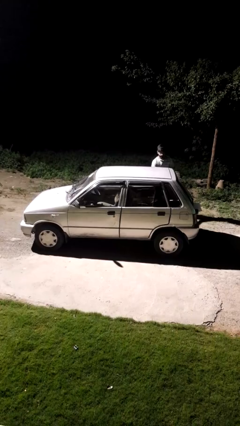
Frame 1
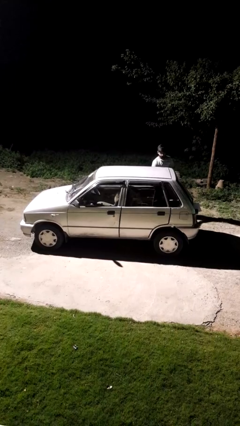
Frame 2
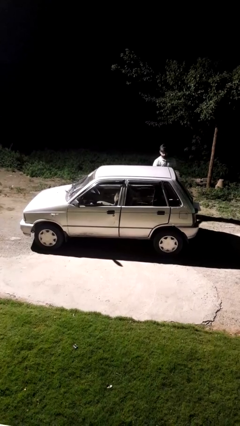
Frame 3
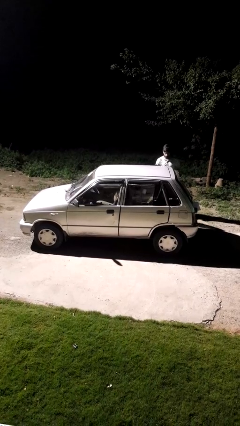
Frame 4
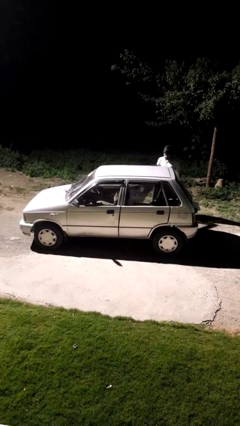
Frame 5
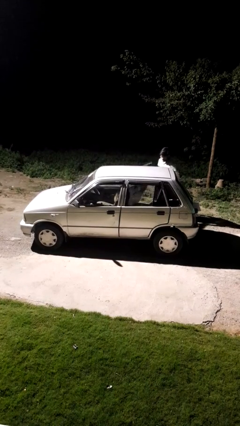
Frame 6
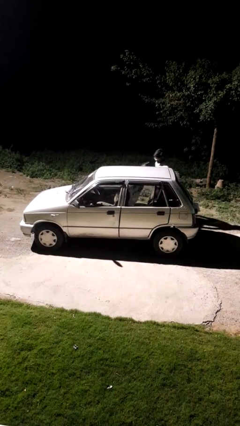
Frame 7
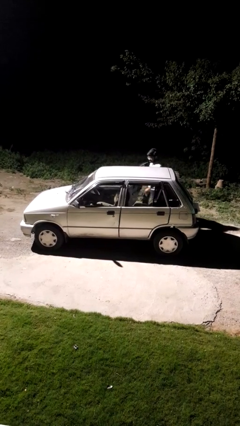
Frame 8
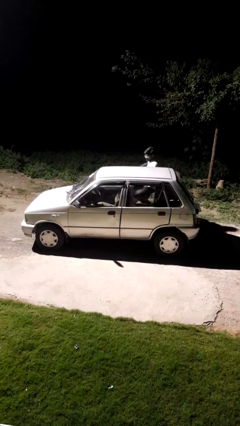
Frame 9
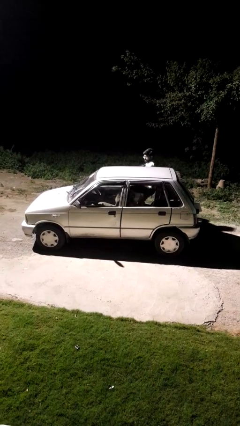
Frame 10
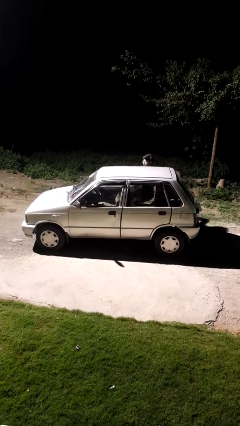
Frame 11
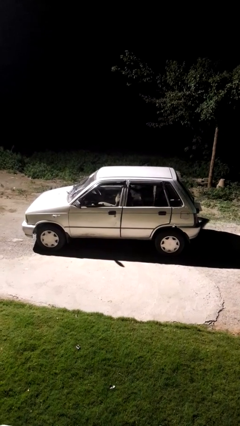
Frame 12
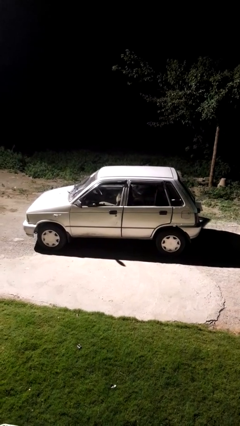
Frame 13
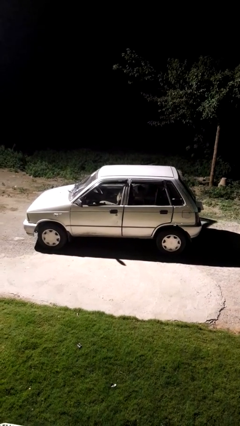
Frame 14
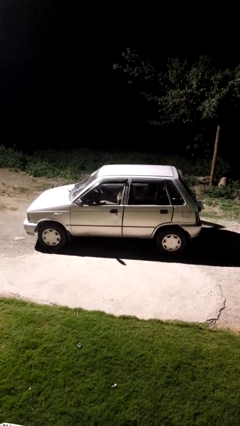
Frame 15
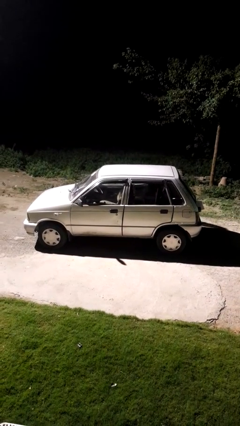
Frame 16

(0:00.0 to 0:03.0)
car picks up person

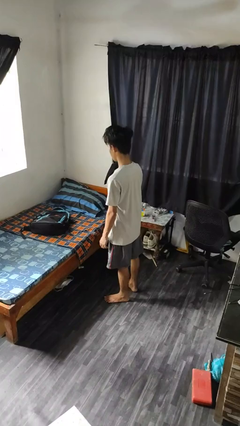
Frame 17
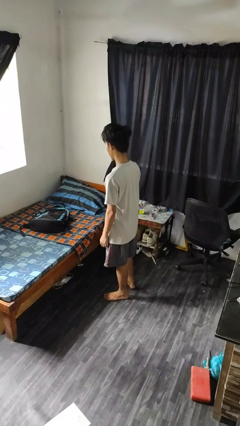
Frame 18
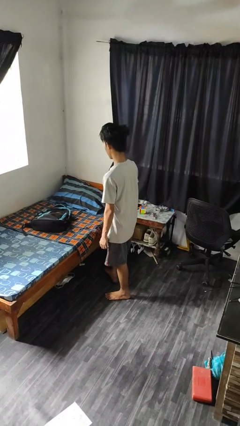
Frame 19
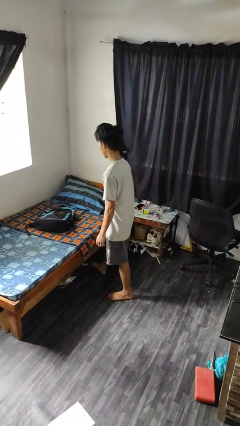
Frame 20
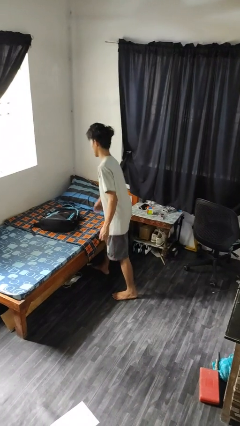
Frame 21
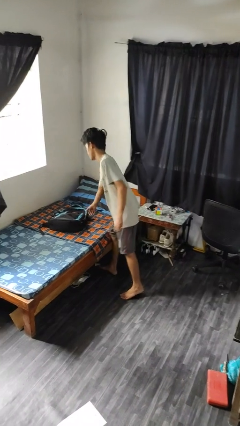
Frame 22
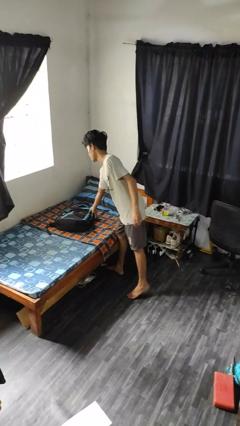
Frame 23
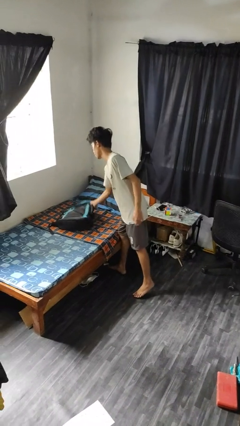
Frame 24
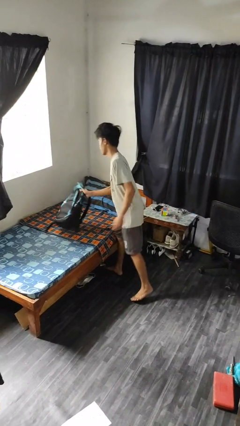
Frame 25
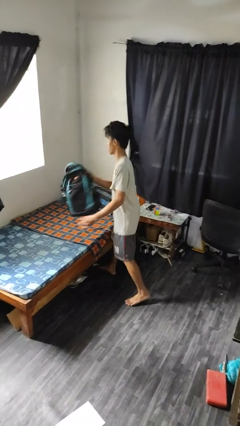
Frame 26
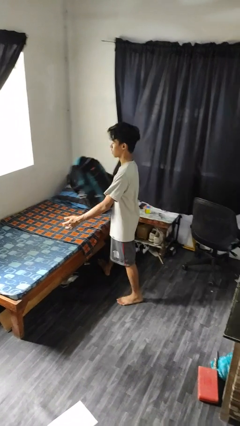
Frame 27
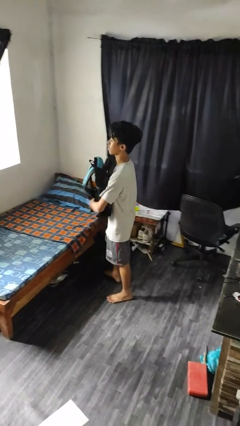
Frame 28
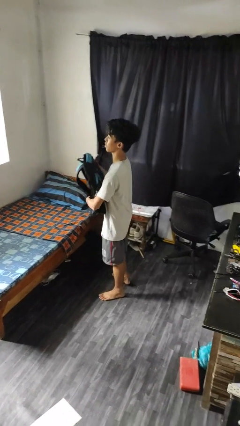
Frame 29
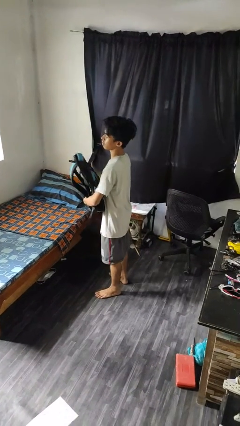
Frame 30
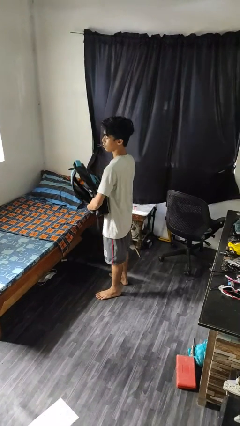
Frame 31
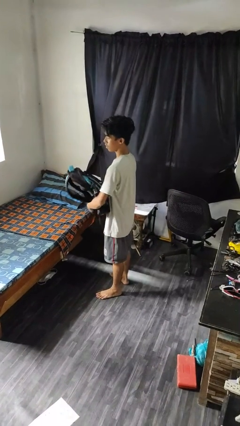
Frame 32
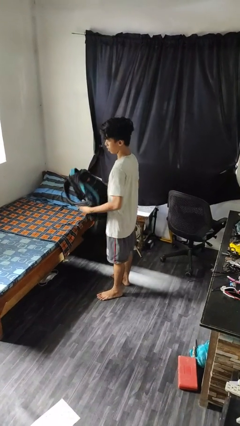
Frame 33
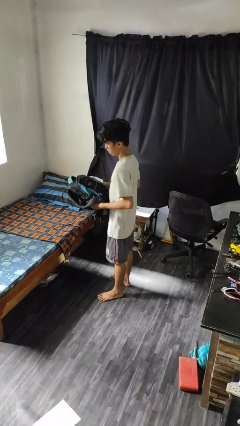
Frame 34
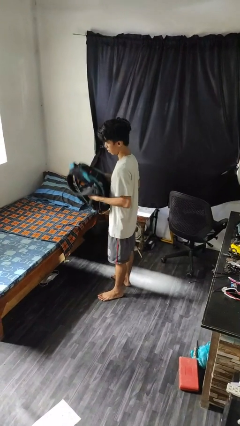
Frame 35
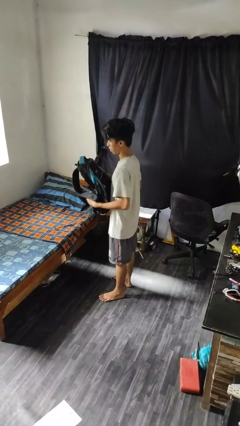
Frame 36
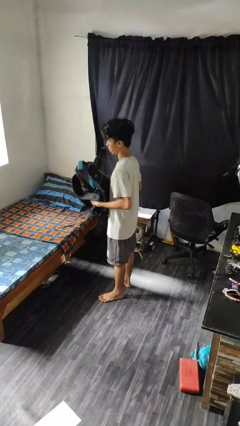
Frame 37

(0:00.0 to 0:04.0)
person picks up object from bed

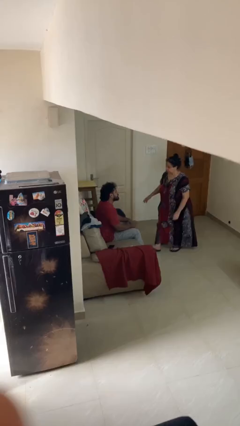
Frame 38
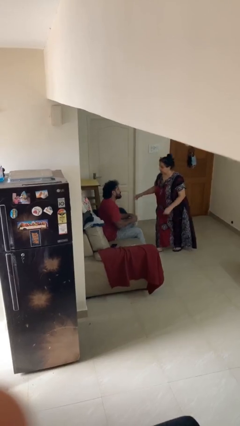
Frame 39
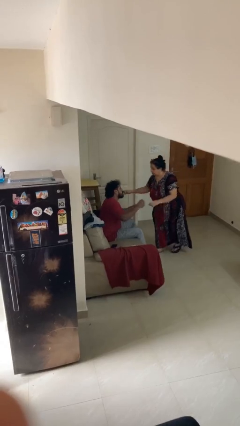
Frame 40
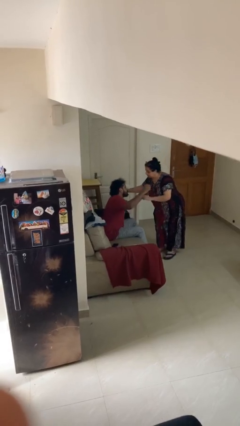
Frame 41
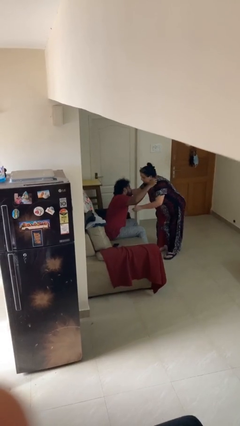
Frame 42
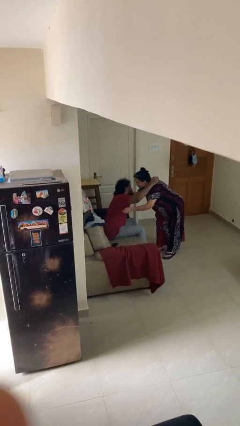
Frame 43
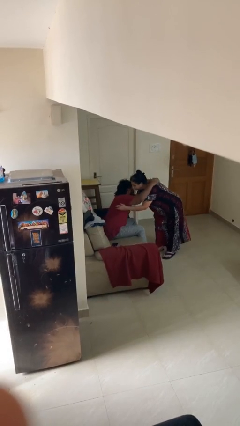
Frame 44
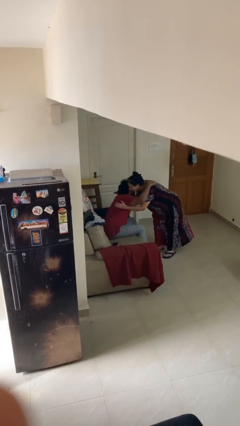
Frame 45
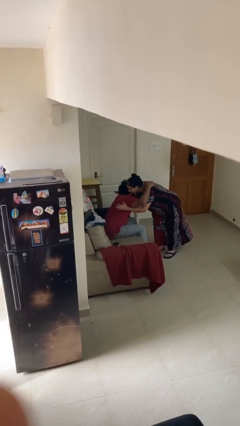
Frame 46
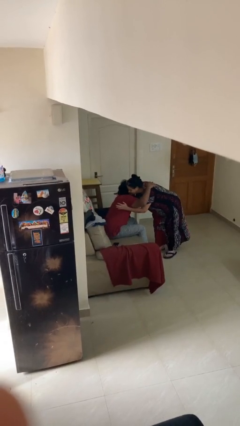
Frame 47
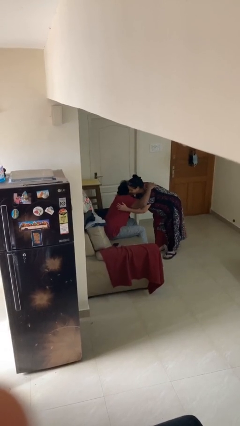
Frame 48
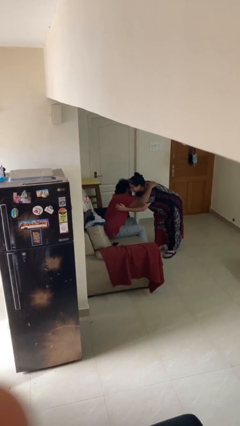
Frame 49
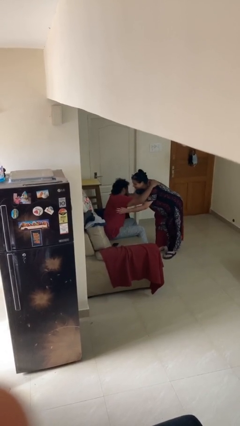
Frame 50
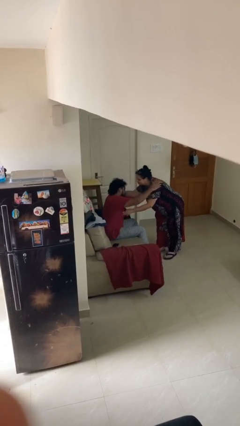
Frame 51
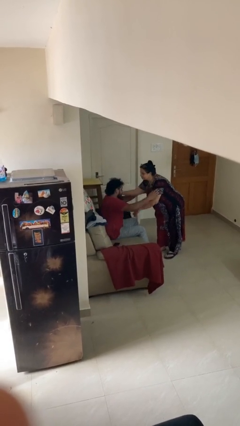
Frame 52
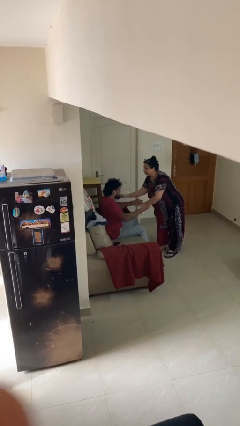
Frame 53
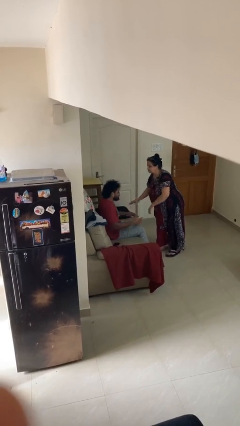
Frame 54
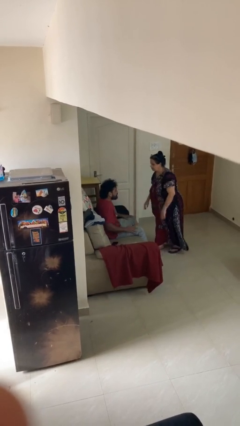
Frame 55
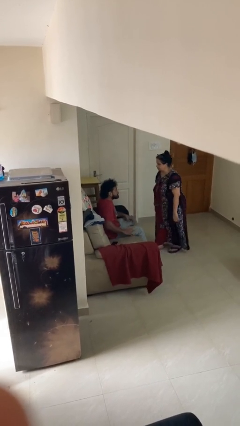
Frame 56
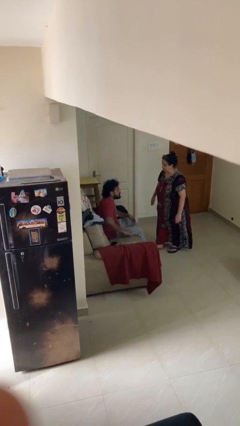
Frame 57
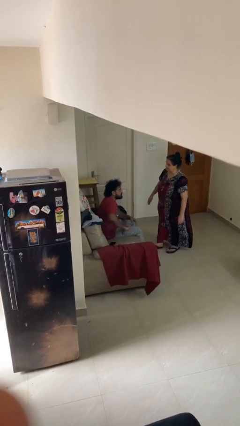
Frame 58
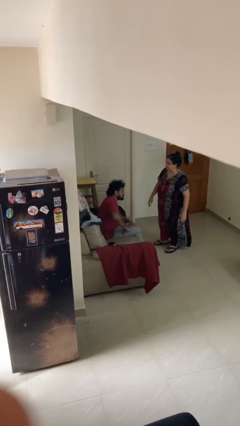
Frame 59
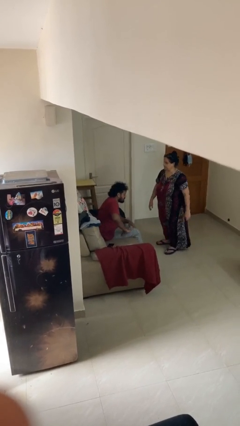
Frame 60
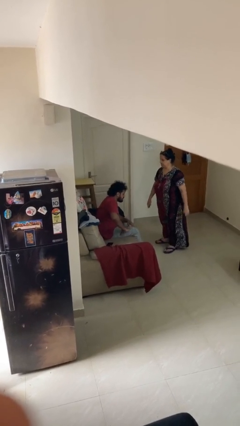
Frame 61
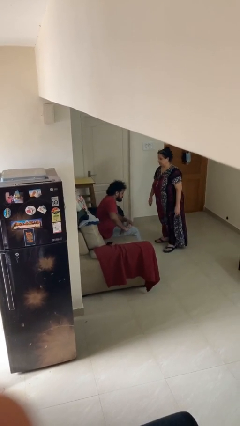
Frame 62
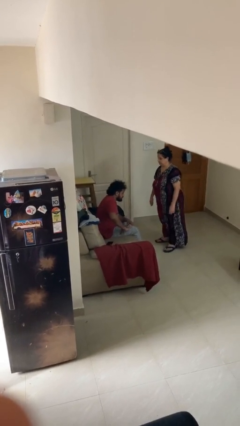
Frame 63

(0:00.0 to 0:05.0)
person embraces person

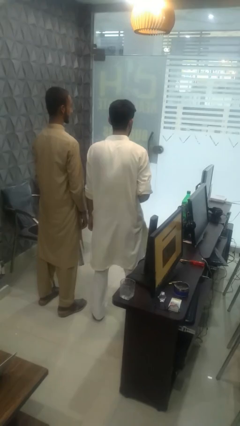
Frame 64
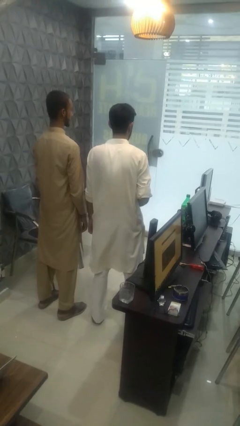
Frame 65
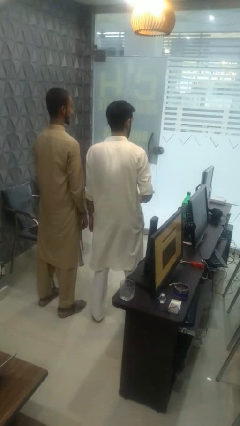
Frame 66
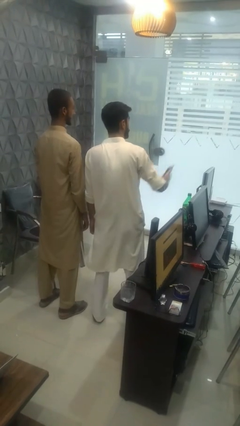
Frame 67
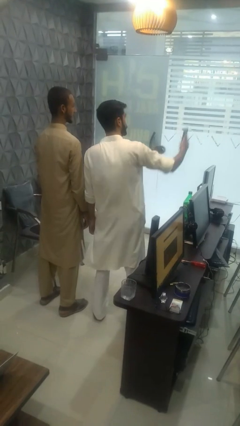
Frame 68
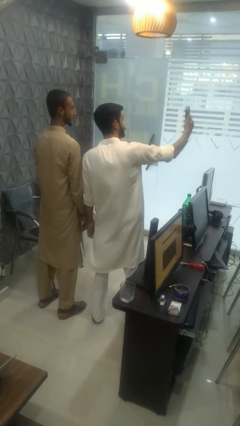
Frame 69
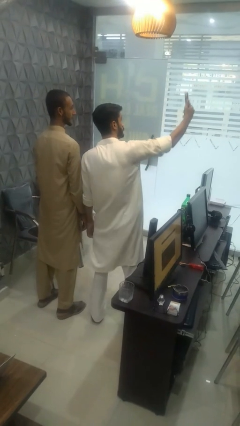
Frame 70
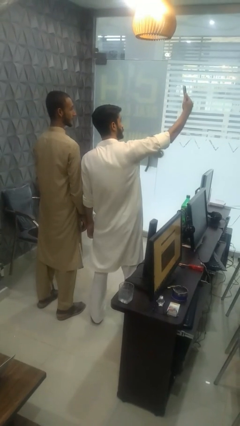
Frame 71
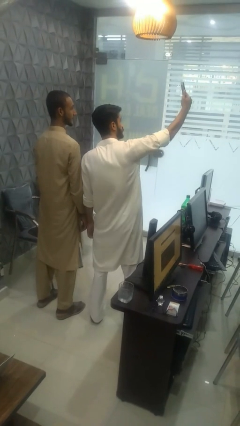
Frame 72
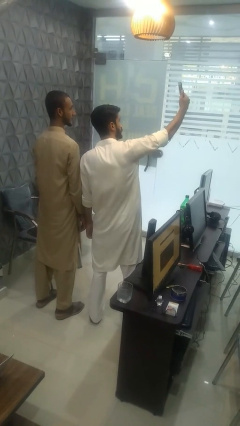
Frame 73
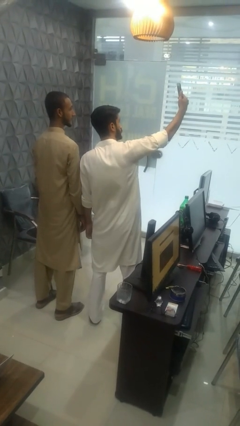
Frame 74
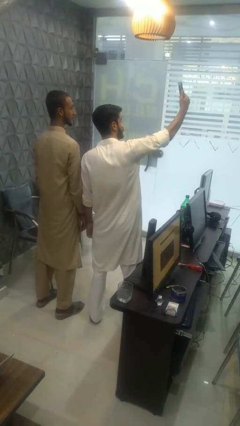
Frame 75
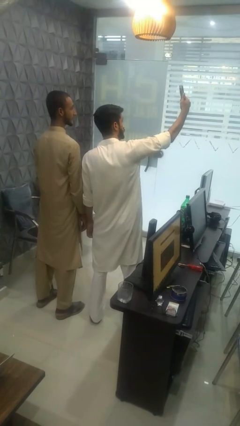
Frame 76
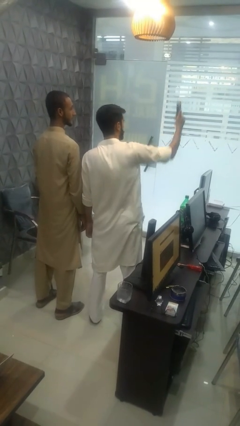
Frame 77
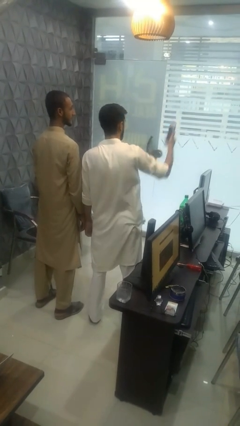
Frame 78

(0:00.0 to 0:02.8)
person takes selfie with person

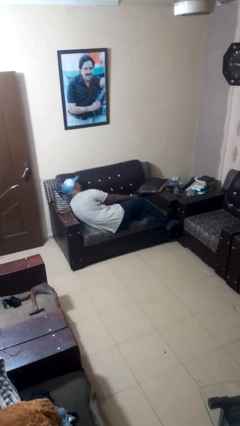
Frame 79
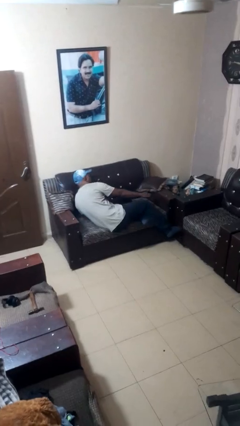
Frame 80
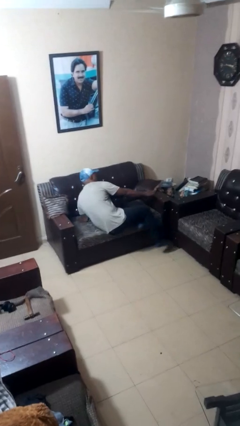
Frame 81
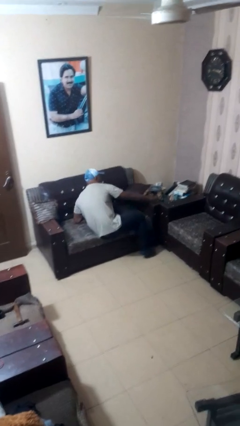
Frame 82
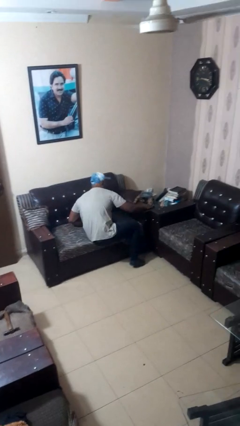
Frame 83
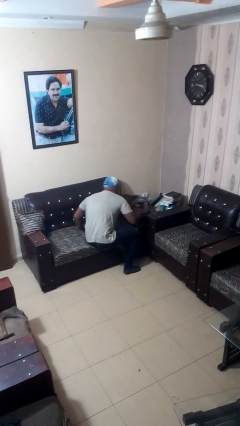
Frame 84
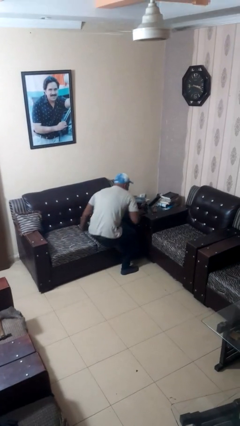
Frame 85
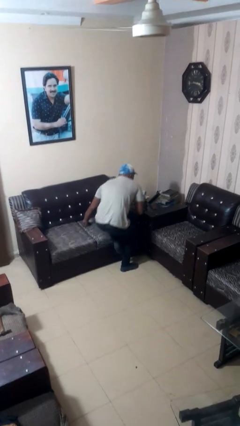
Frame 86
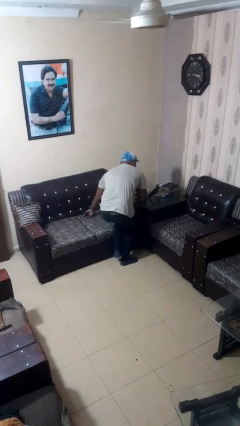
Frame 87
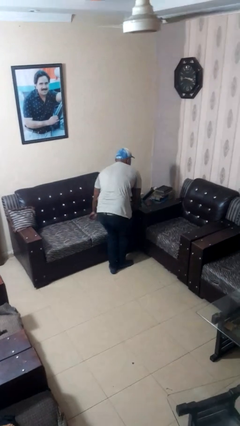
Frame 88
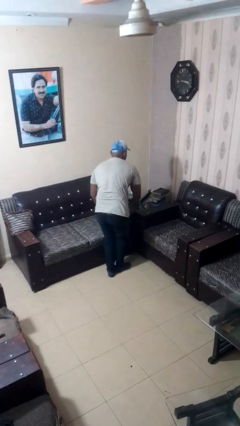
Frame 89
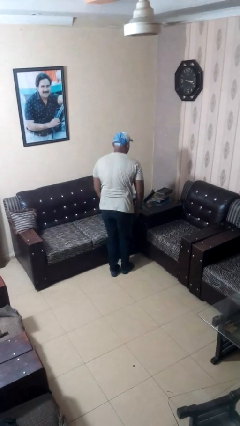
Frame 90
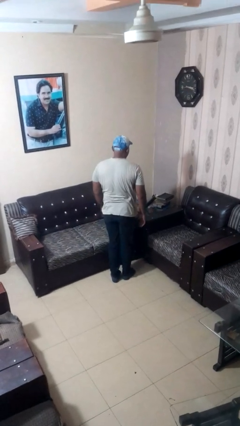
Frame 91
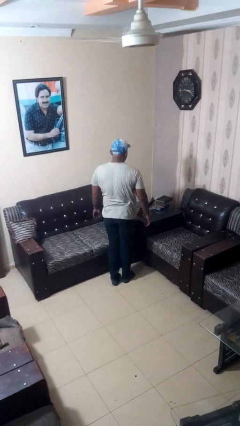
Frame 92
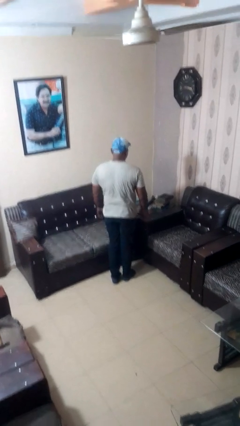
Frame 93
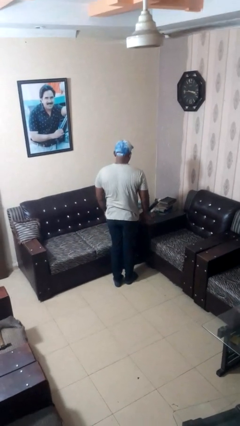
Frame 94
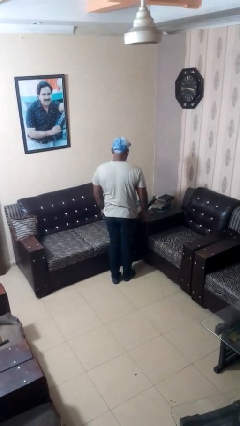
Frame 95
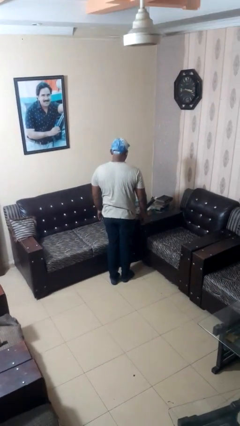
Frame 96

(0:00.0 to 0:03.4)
person stands up
